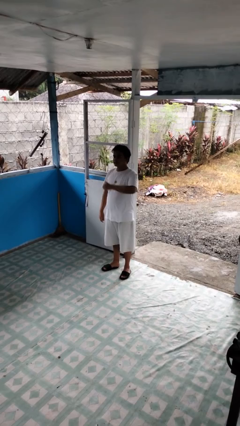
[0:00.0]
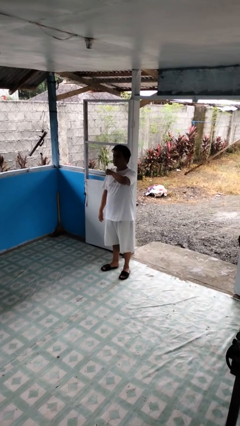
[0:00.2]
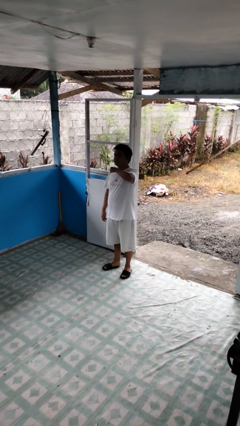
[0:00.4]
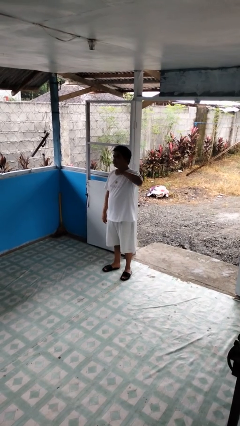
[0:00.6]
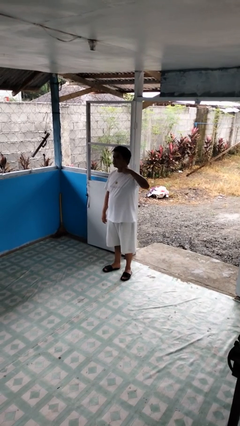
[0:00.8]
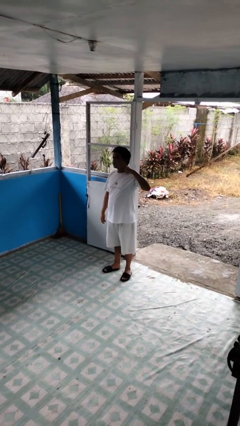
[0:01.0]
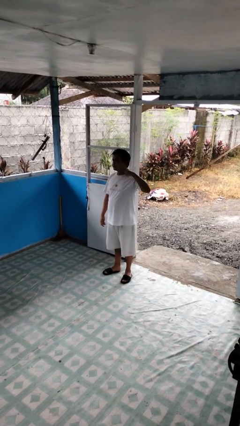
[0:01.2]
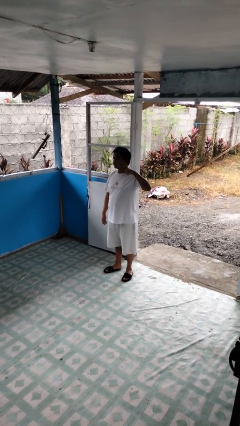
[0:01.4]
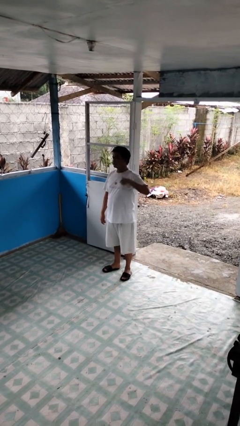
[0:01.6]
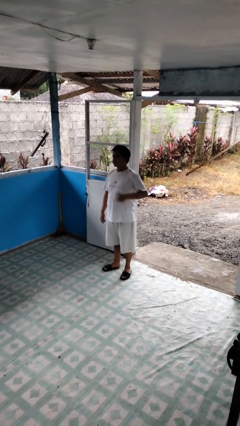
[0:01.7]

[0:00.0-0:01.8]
person gestures cut

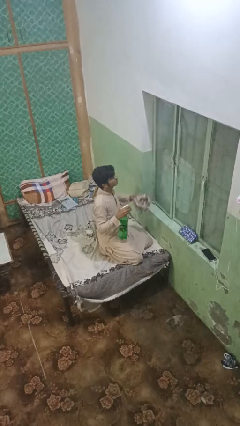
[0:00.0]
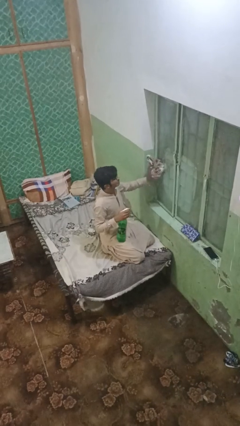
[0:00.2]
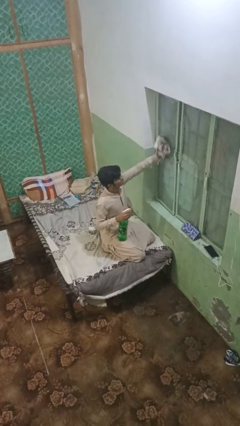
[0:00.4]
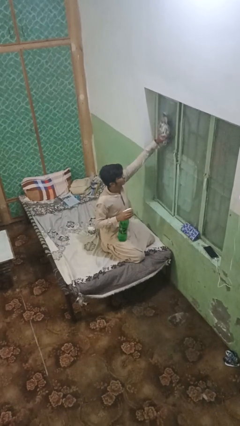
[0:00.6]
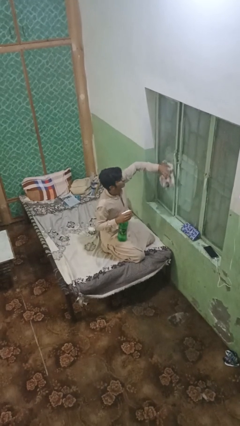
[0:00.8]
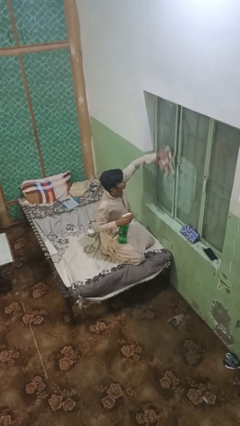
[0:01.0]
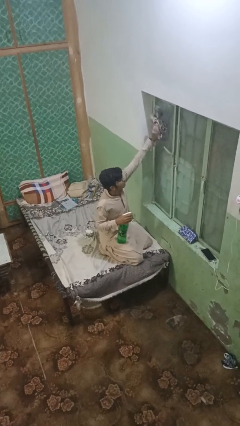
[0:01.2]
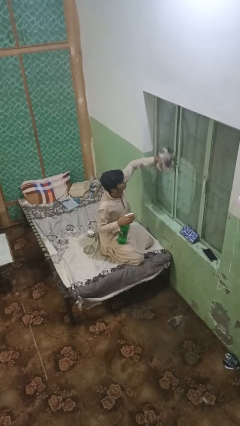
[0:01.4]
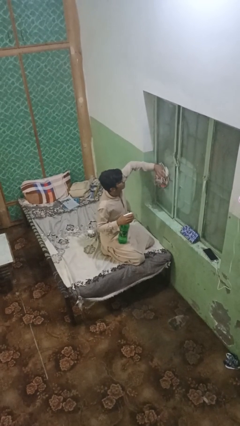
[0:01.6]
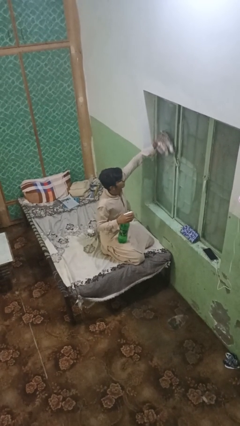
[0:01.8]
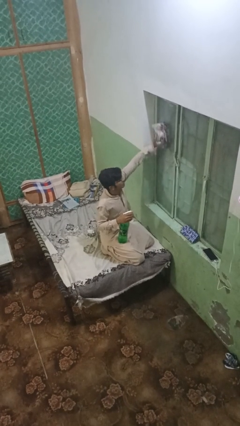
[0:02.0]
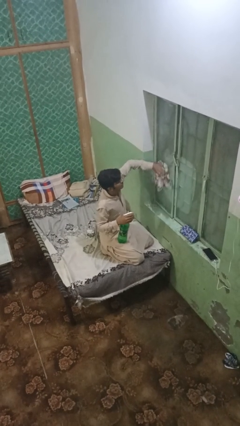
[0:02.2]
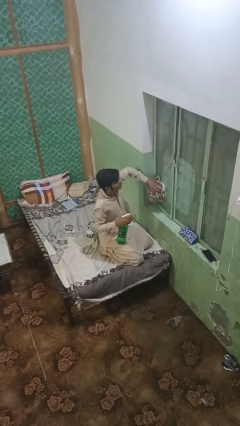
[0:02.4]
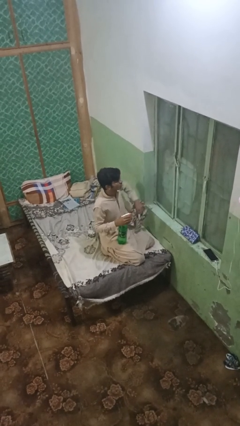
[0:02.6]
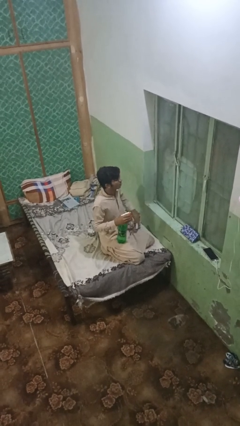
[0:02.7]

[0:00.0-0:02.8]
person washes window

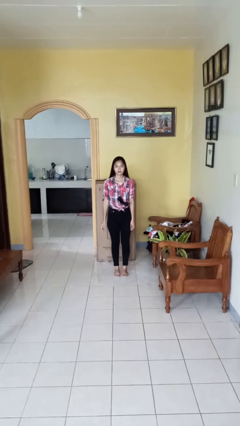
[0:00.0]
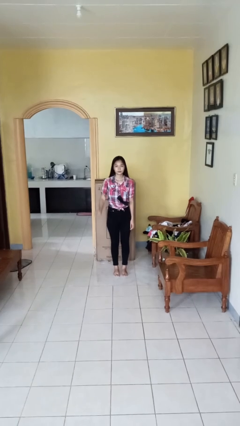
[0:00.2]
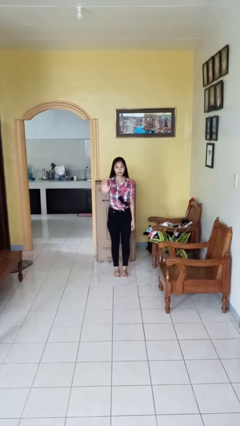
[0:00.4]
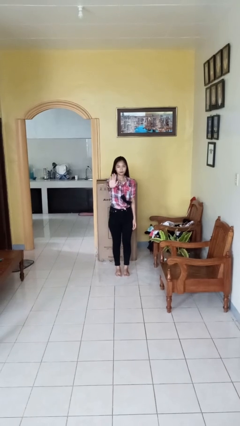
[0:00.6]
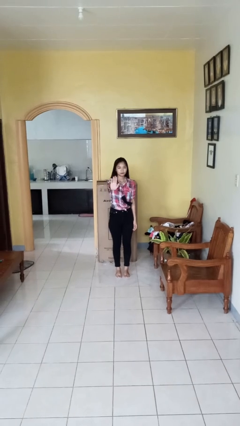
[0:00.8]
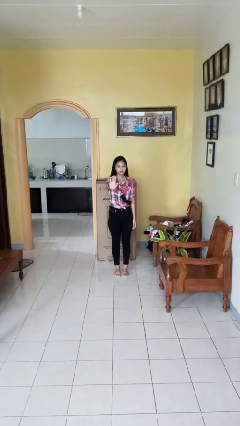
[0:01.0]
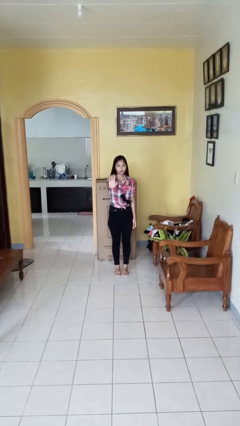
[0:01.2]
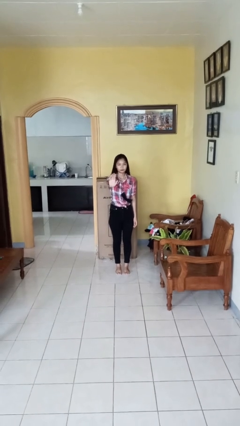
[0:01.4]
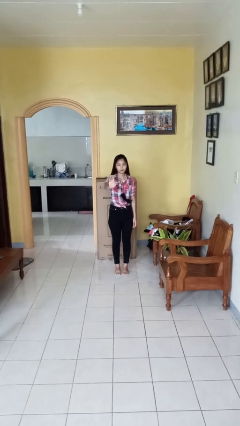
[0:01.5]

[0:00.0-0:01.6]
person gestures stop

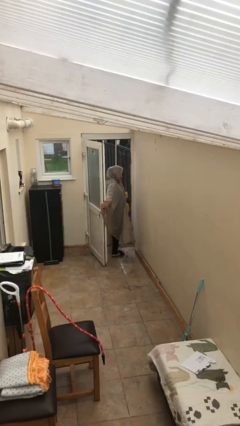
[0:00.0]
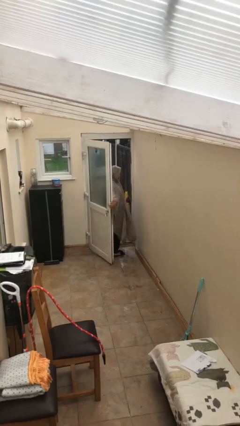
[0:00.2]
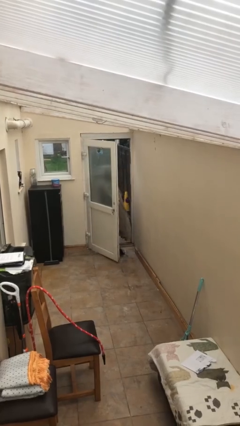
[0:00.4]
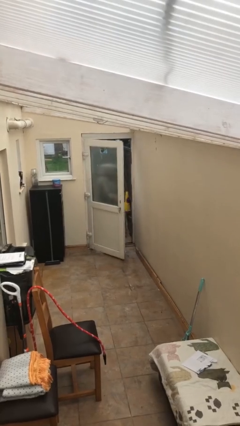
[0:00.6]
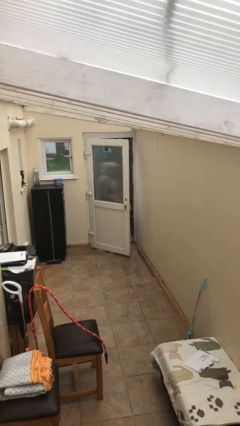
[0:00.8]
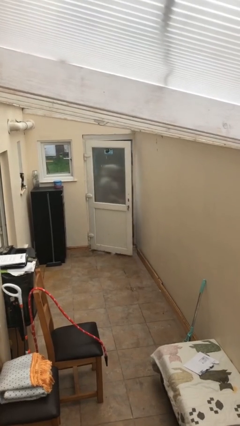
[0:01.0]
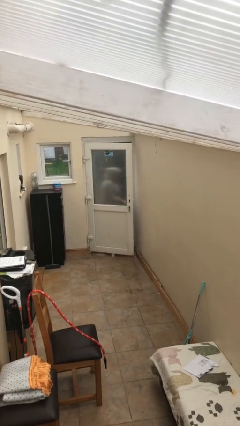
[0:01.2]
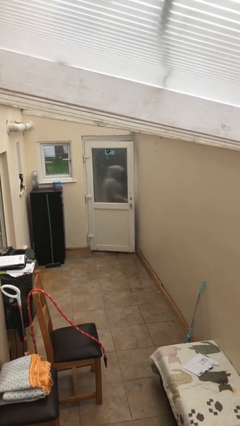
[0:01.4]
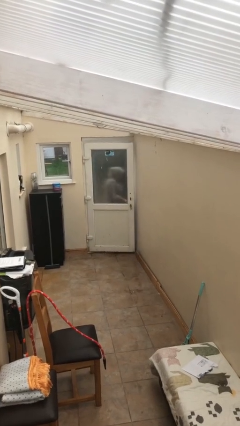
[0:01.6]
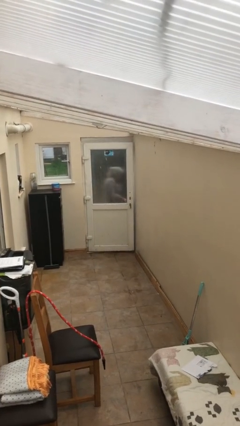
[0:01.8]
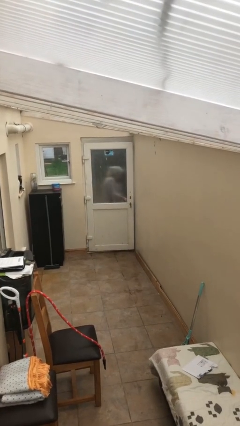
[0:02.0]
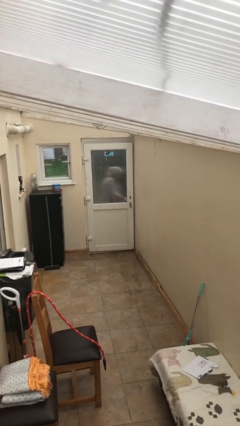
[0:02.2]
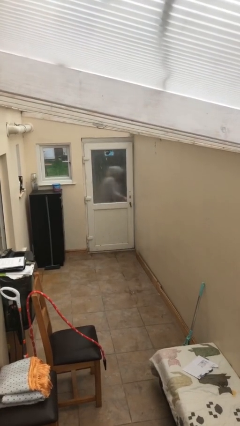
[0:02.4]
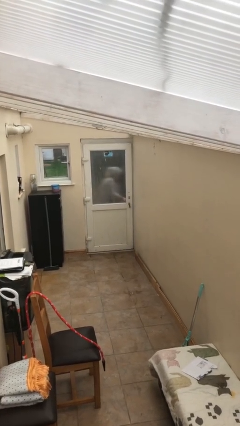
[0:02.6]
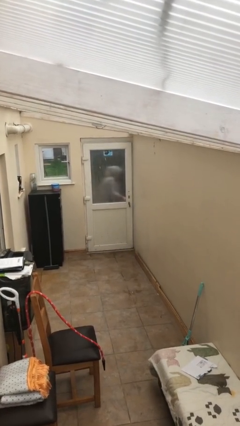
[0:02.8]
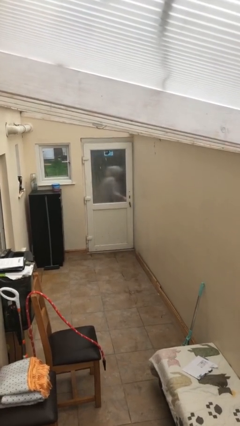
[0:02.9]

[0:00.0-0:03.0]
person closes facility door

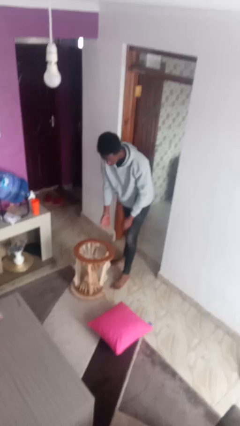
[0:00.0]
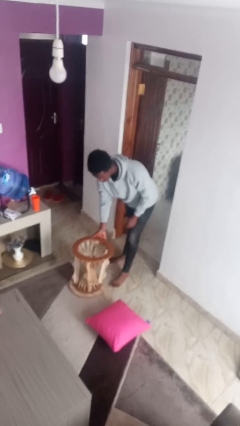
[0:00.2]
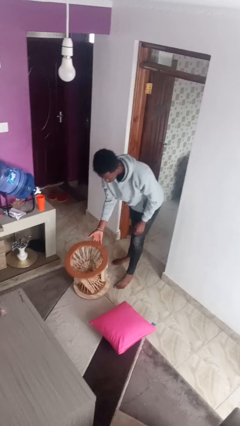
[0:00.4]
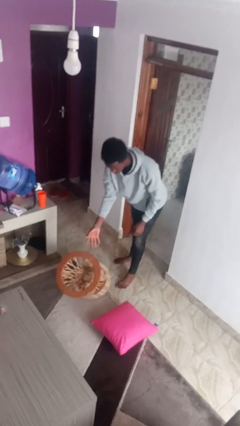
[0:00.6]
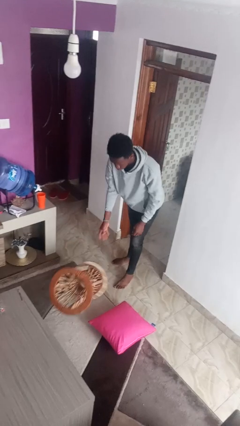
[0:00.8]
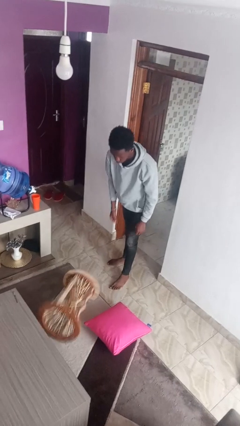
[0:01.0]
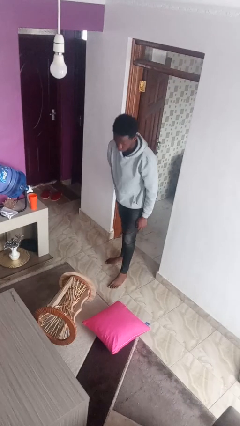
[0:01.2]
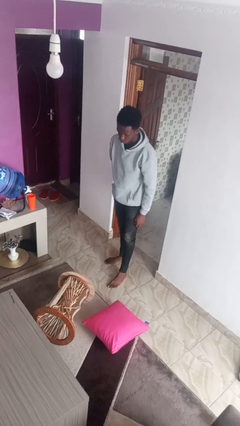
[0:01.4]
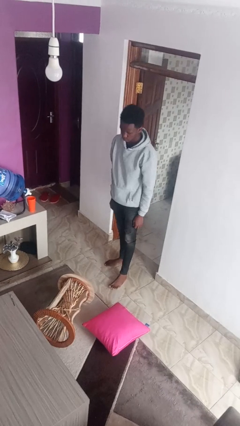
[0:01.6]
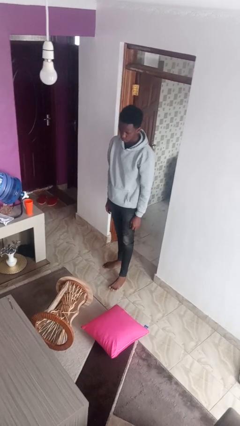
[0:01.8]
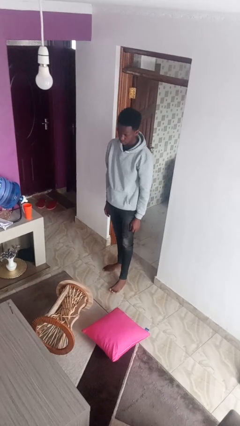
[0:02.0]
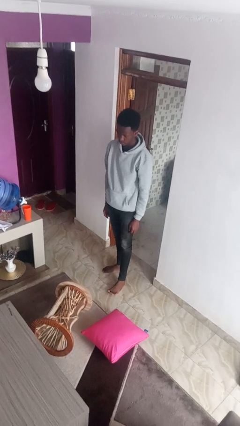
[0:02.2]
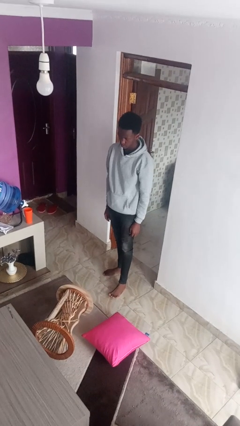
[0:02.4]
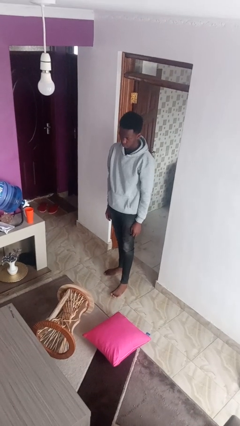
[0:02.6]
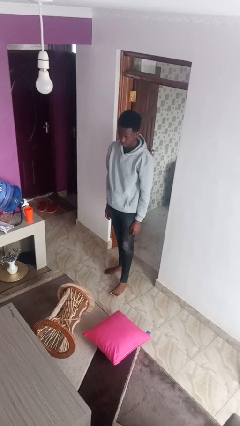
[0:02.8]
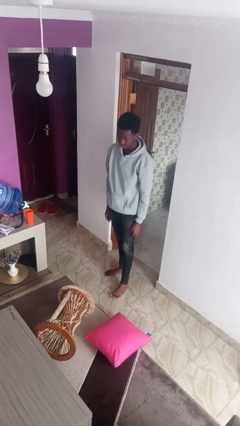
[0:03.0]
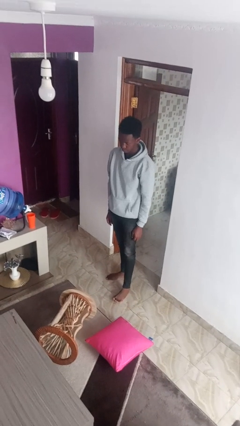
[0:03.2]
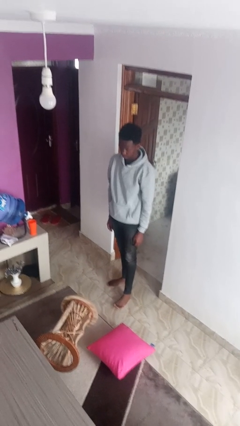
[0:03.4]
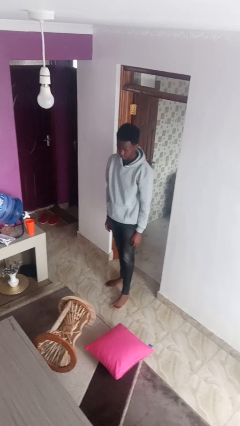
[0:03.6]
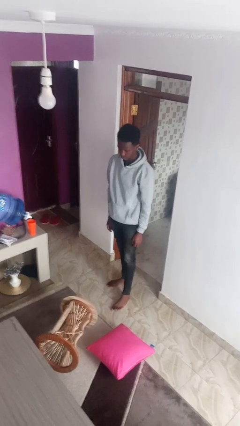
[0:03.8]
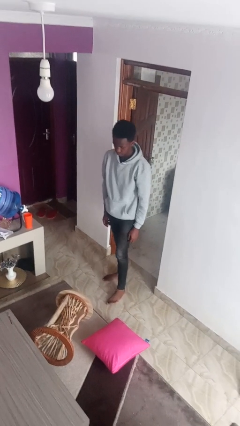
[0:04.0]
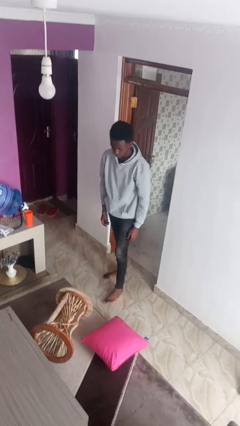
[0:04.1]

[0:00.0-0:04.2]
person knocks over furniture

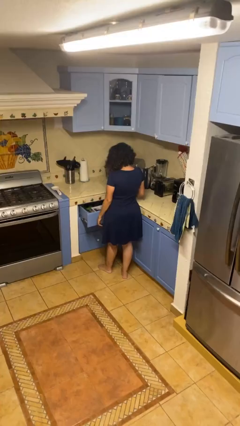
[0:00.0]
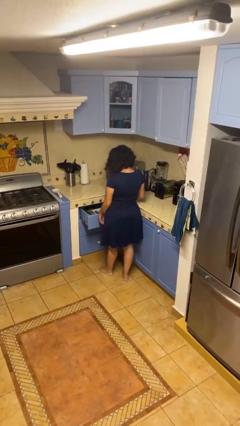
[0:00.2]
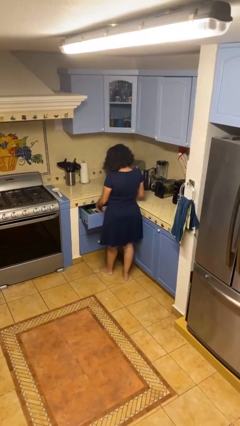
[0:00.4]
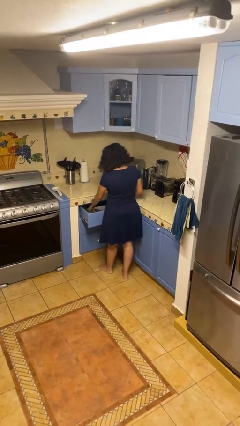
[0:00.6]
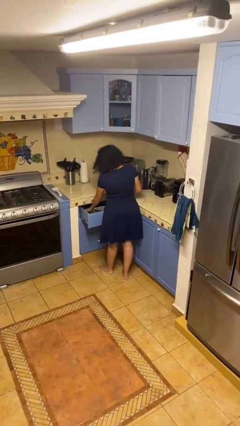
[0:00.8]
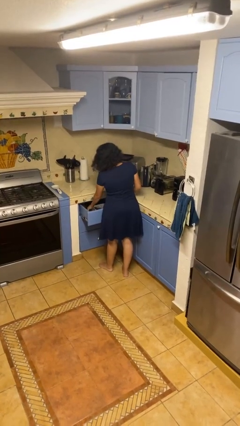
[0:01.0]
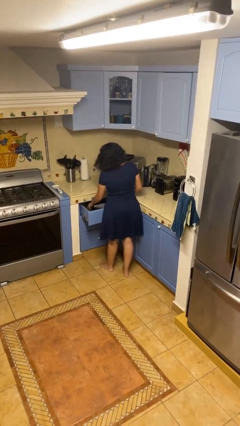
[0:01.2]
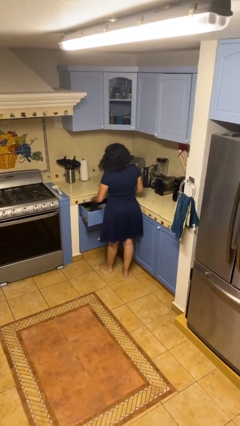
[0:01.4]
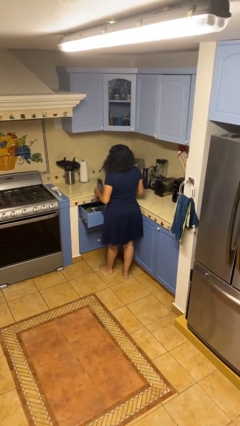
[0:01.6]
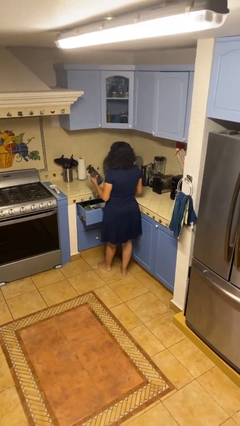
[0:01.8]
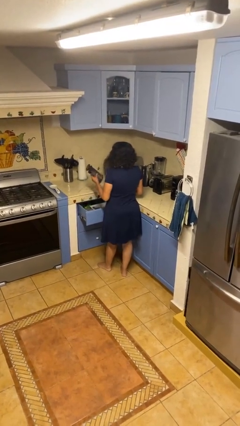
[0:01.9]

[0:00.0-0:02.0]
person takes object from kitchen drawer

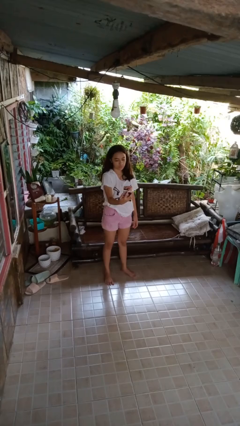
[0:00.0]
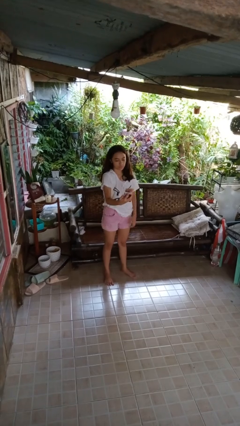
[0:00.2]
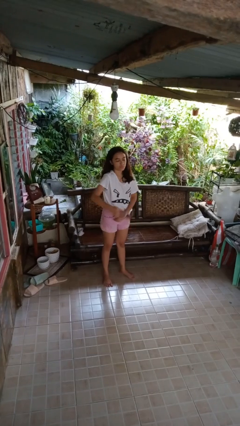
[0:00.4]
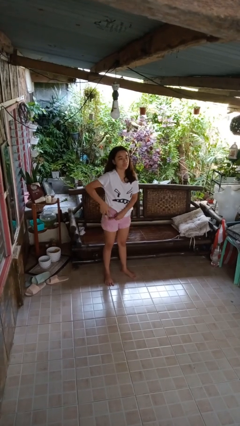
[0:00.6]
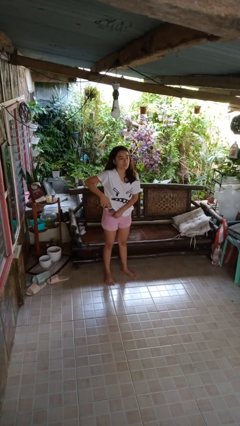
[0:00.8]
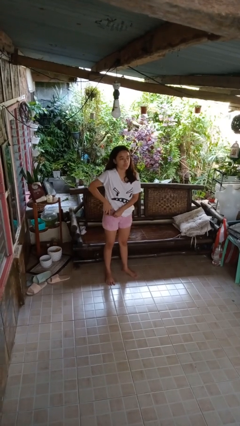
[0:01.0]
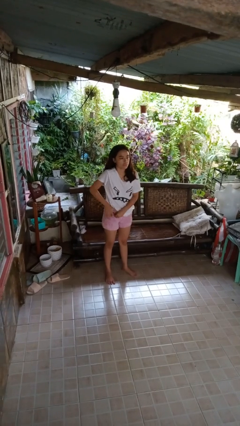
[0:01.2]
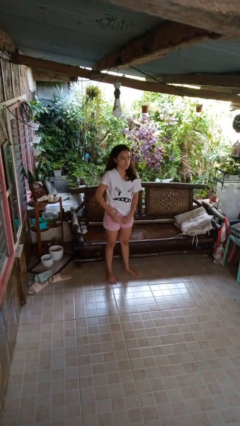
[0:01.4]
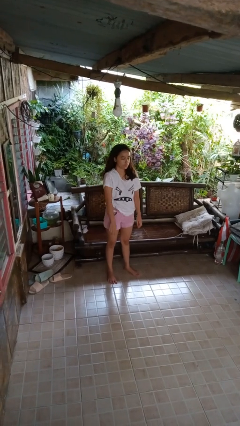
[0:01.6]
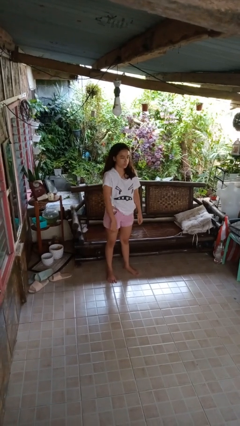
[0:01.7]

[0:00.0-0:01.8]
person puts phone into pocket

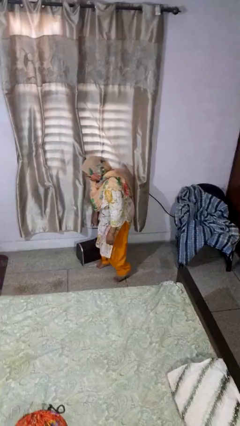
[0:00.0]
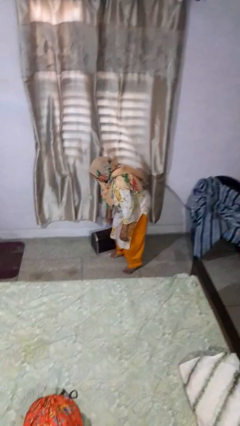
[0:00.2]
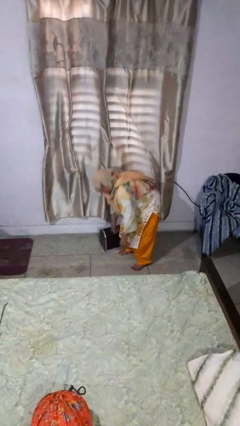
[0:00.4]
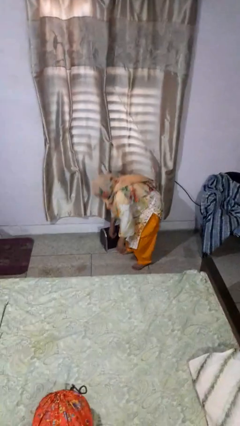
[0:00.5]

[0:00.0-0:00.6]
person trips on object on floor
